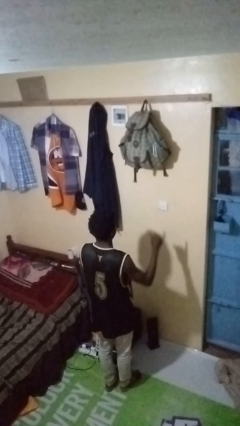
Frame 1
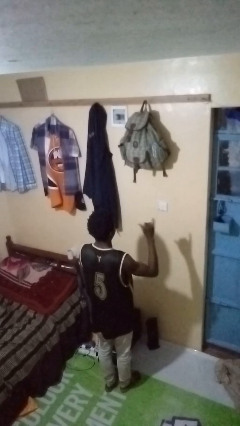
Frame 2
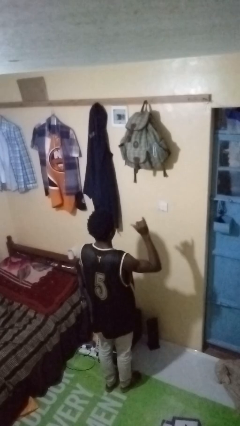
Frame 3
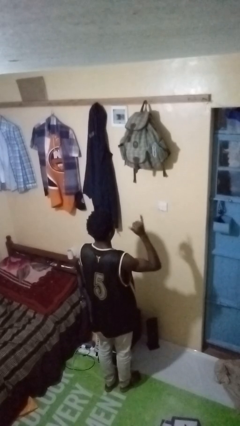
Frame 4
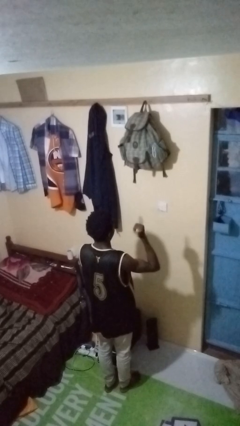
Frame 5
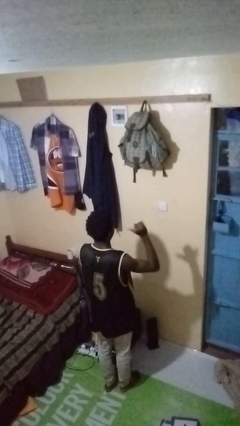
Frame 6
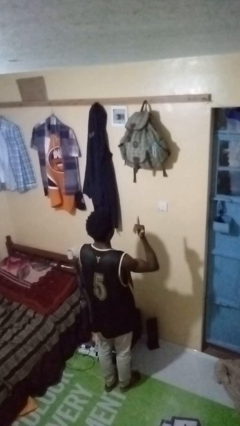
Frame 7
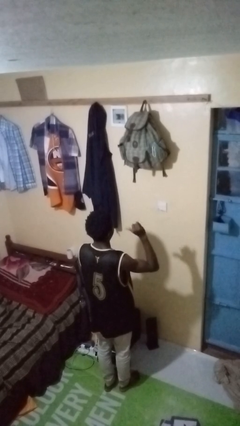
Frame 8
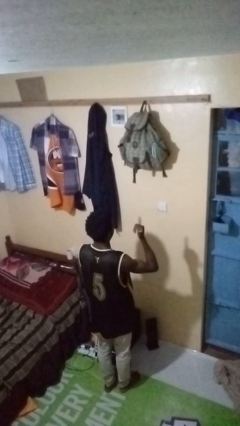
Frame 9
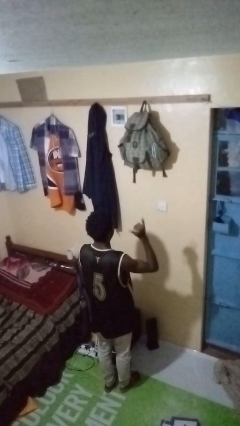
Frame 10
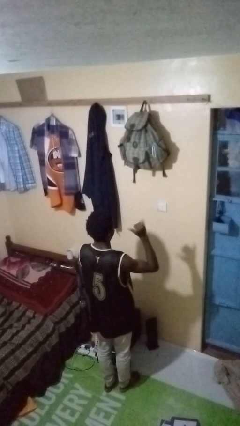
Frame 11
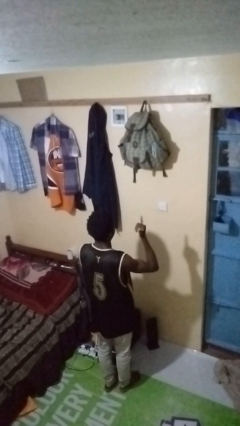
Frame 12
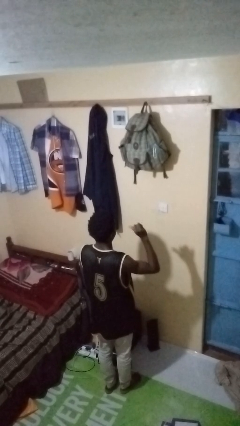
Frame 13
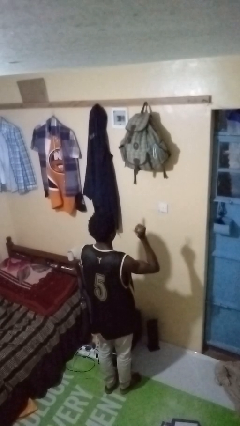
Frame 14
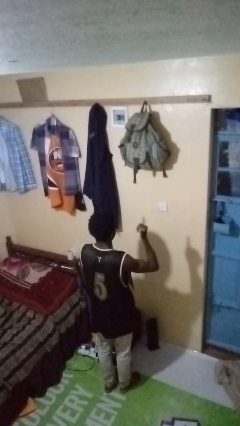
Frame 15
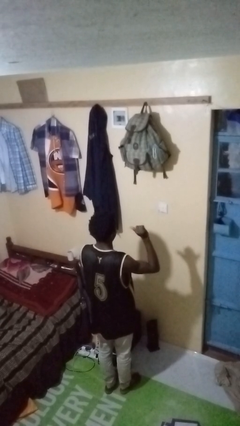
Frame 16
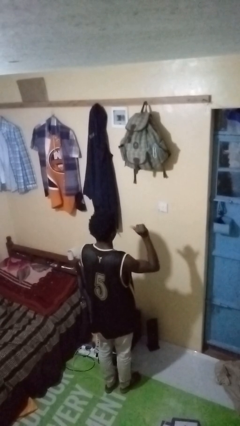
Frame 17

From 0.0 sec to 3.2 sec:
person gestures hang loose

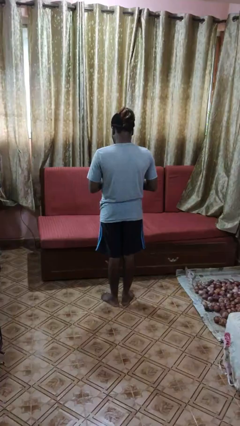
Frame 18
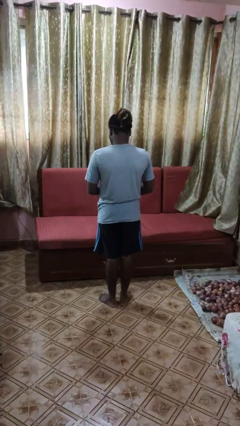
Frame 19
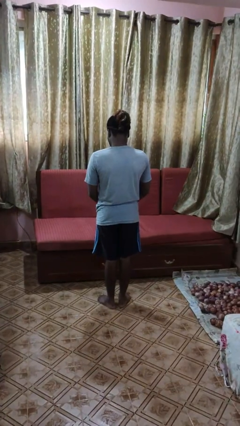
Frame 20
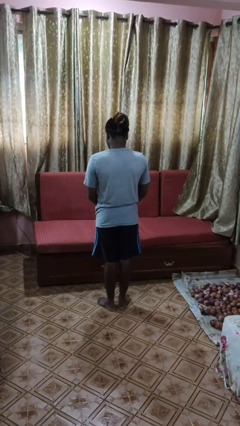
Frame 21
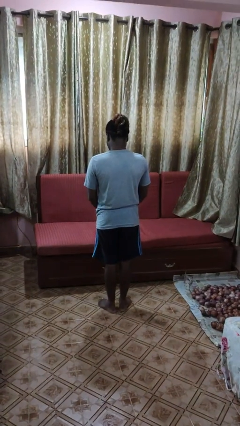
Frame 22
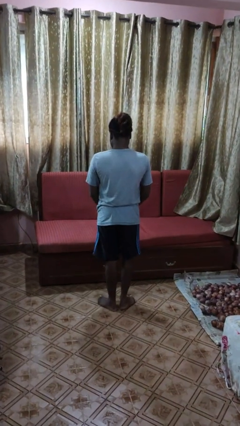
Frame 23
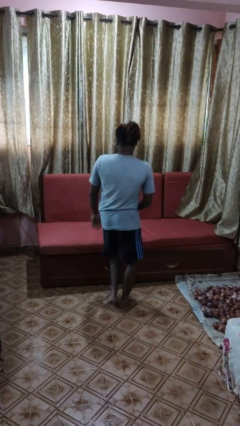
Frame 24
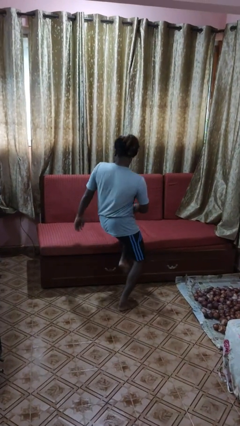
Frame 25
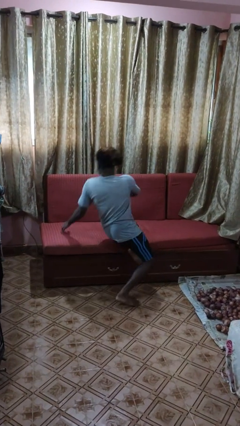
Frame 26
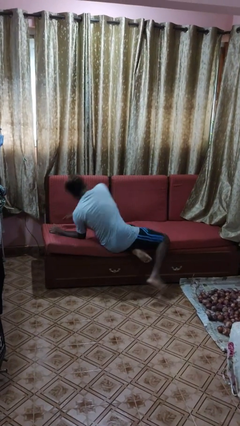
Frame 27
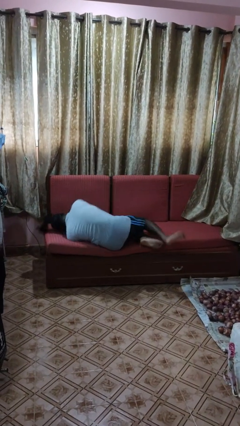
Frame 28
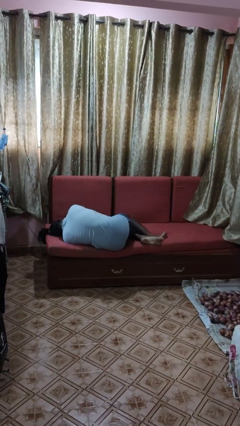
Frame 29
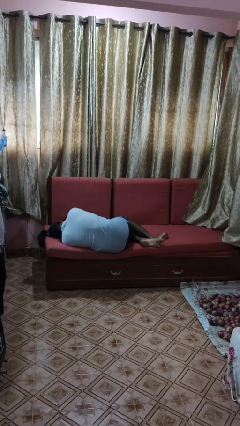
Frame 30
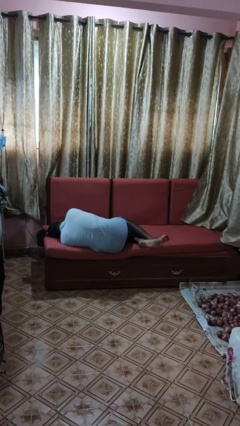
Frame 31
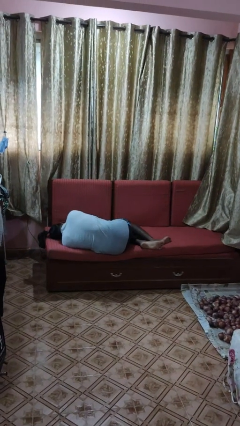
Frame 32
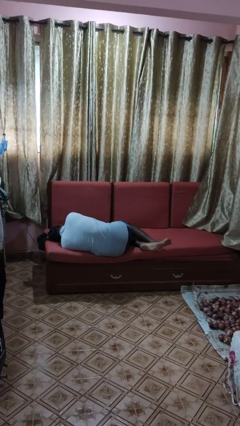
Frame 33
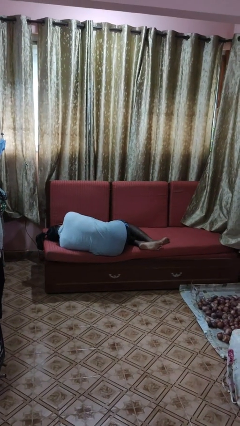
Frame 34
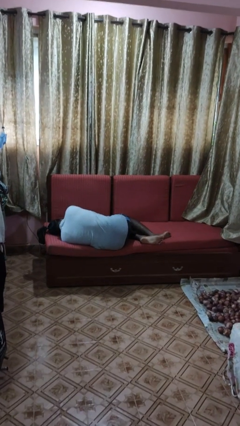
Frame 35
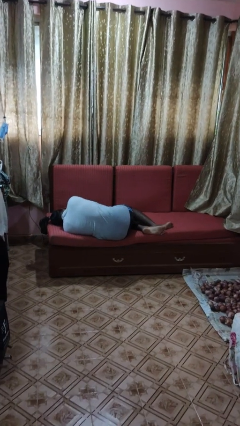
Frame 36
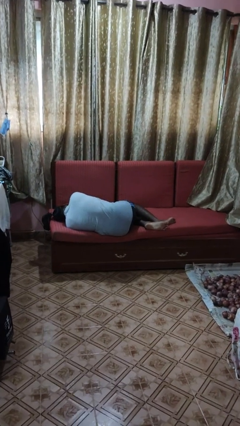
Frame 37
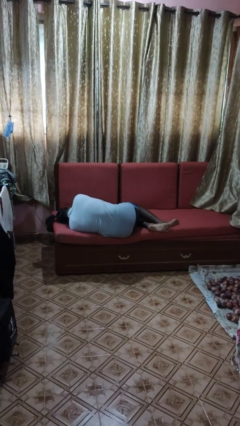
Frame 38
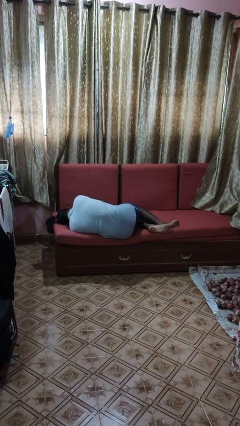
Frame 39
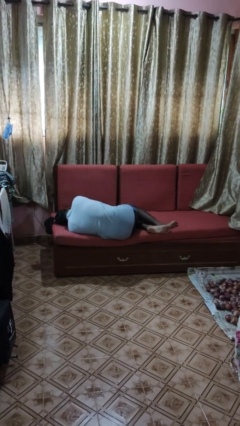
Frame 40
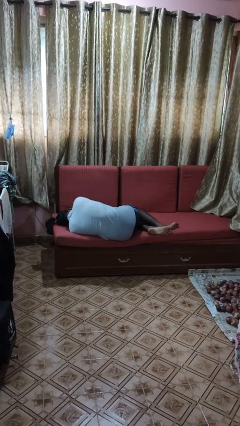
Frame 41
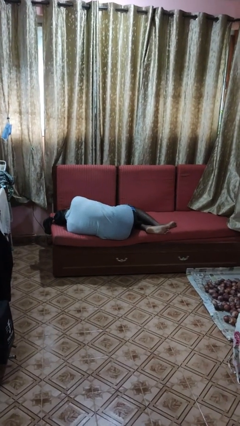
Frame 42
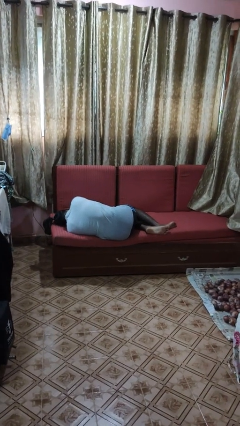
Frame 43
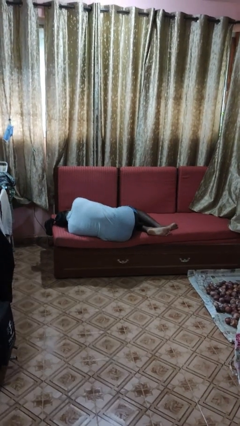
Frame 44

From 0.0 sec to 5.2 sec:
person lies down on couch

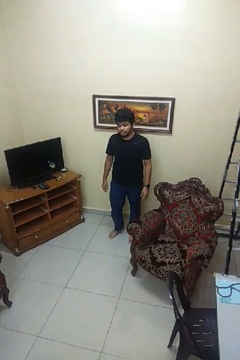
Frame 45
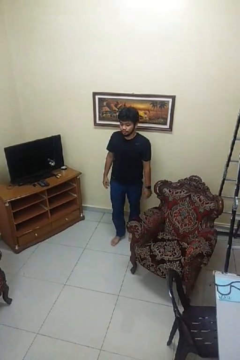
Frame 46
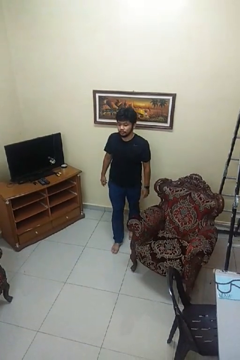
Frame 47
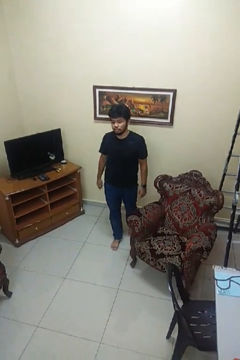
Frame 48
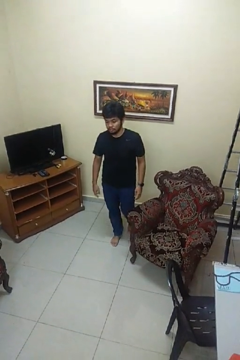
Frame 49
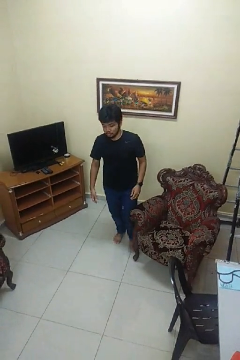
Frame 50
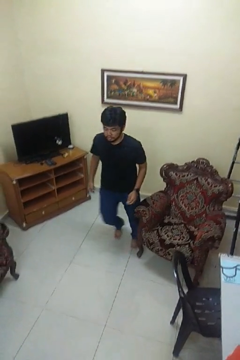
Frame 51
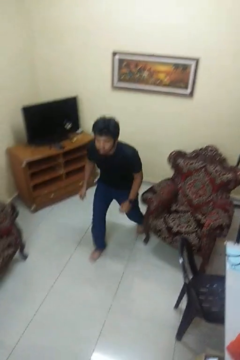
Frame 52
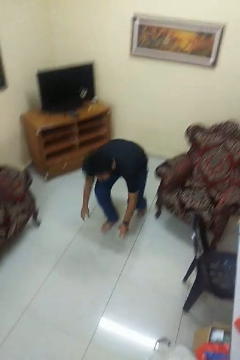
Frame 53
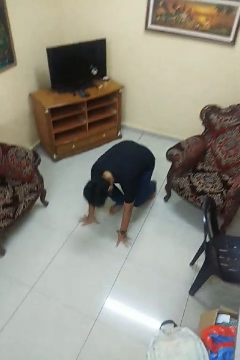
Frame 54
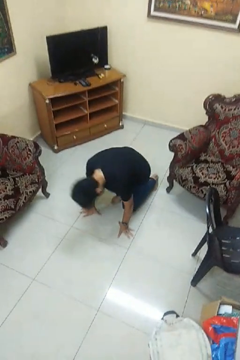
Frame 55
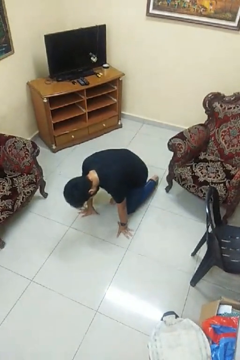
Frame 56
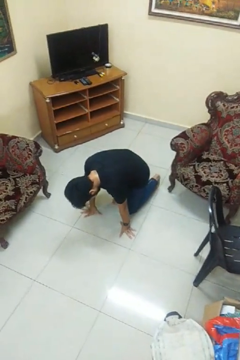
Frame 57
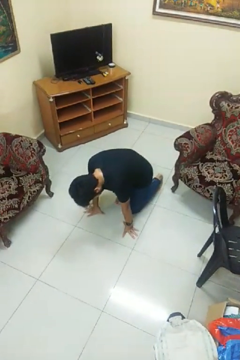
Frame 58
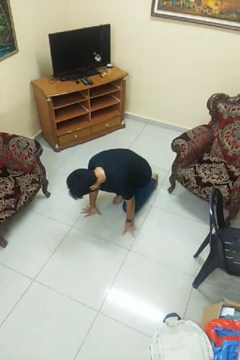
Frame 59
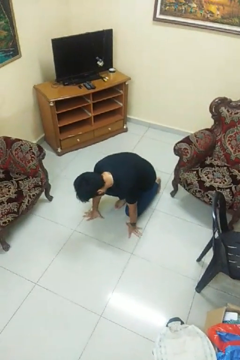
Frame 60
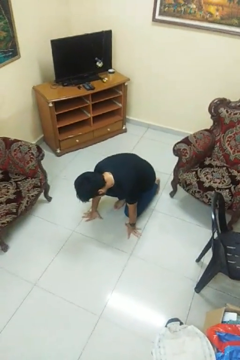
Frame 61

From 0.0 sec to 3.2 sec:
person trips on object on floor

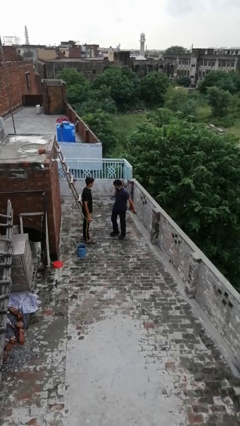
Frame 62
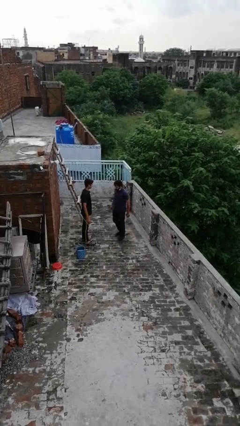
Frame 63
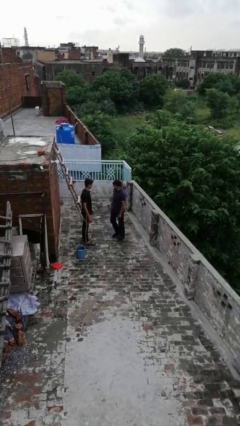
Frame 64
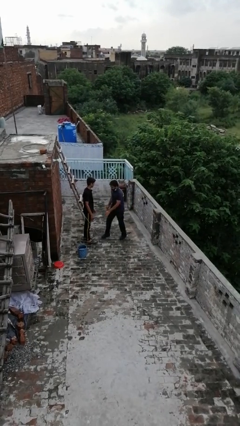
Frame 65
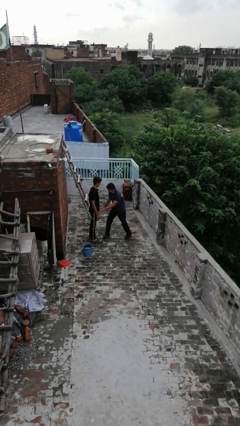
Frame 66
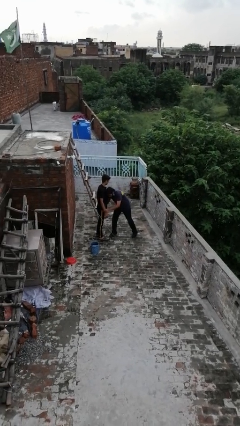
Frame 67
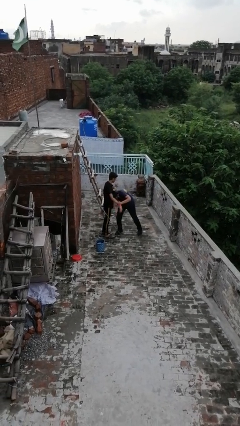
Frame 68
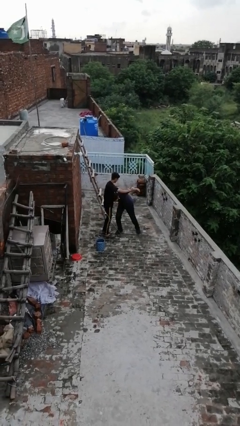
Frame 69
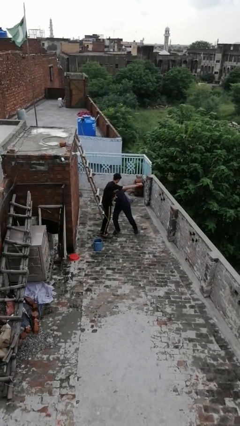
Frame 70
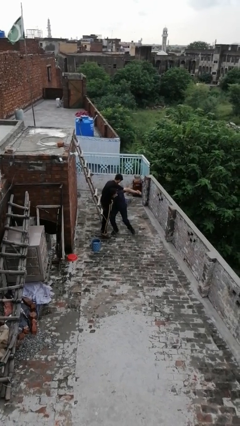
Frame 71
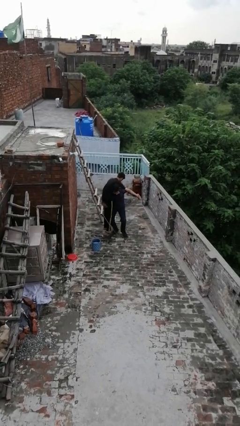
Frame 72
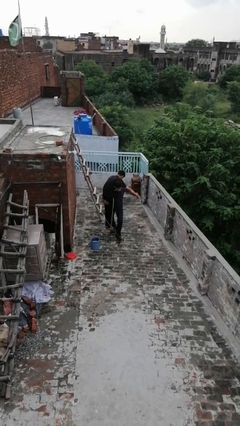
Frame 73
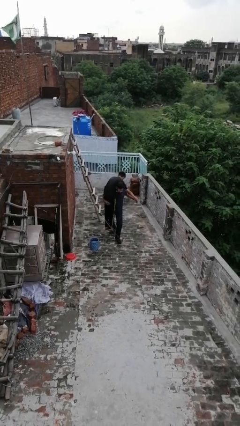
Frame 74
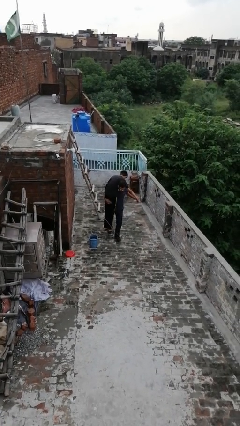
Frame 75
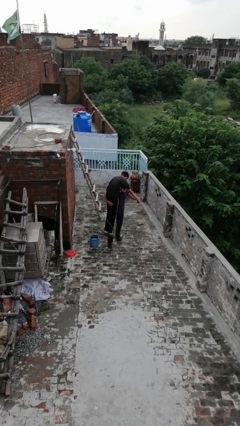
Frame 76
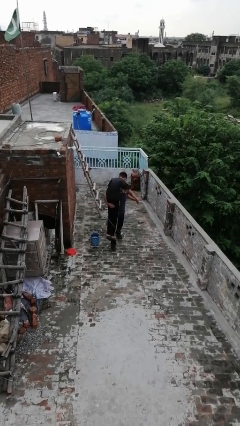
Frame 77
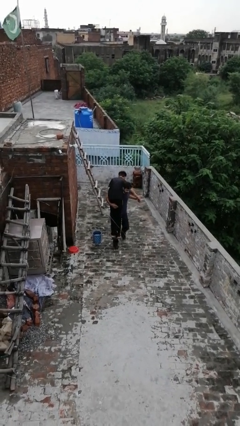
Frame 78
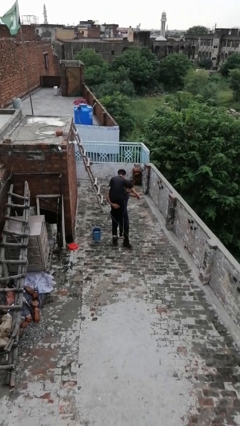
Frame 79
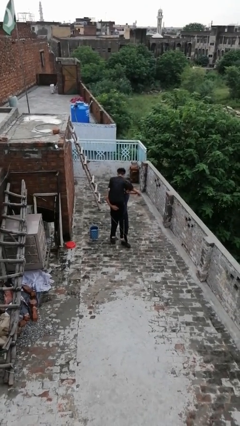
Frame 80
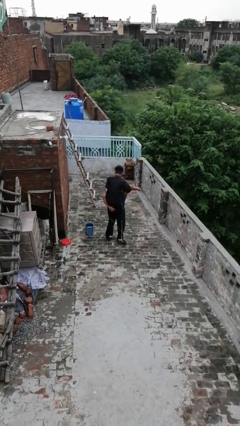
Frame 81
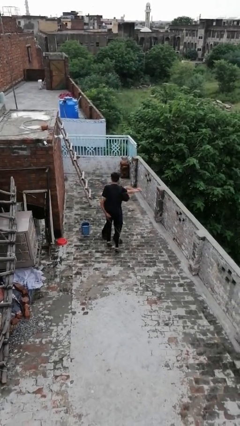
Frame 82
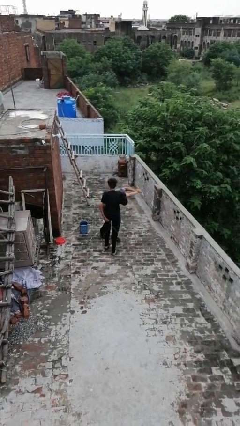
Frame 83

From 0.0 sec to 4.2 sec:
person carries person on shoulders

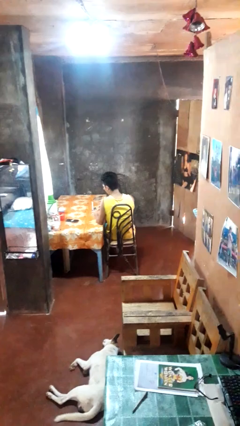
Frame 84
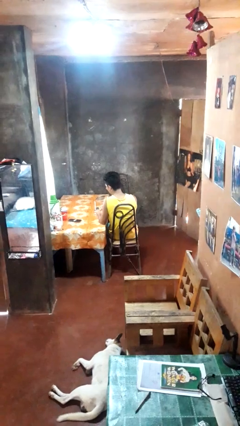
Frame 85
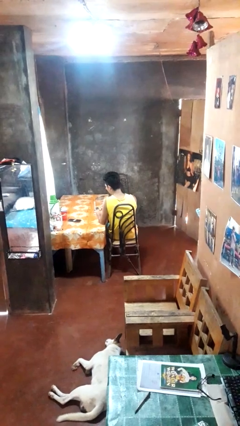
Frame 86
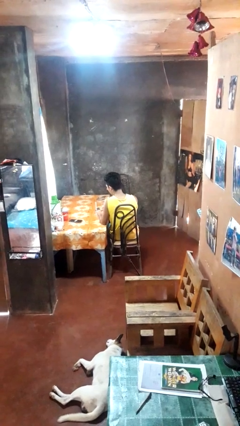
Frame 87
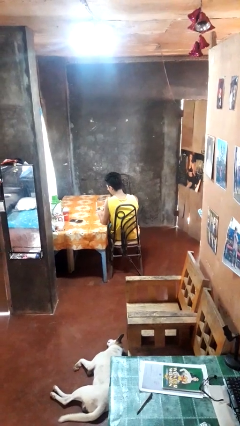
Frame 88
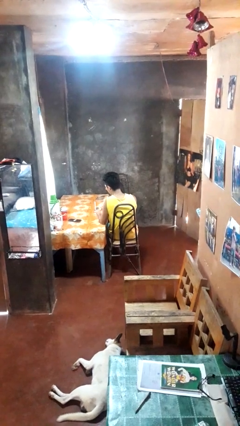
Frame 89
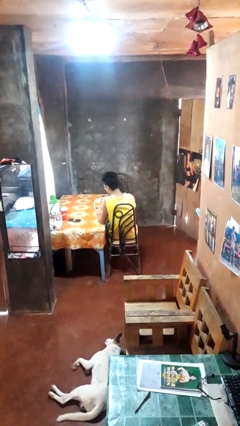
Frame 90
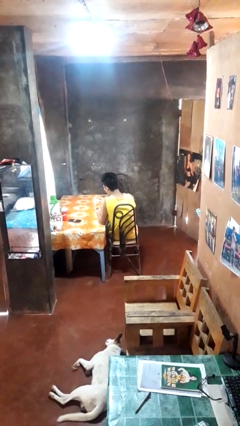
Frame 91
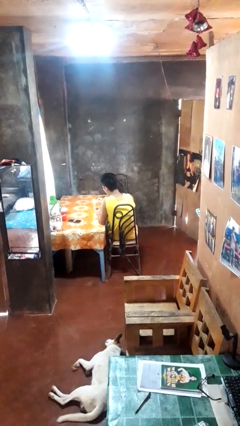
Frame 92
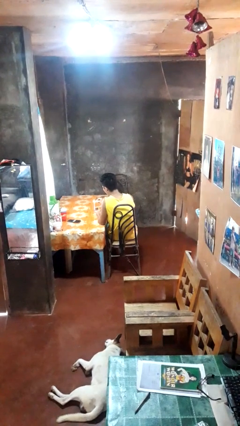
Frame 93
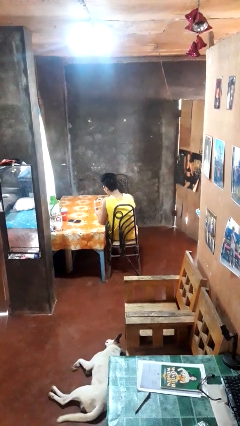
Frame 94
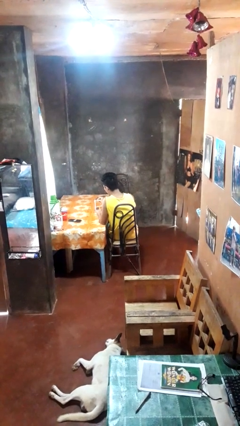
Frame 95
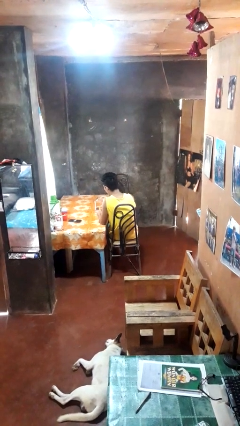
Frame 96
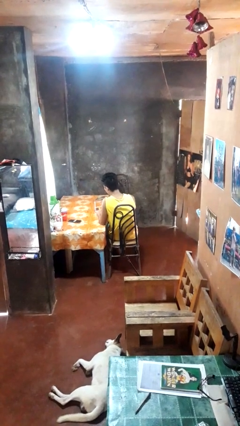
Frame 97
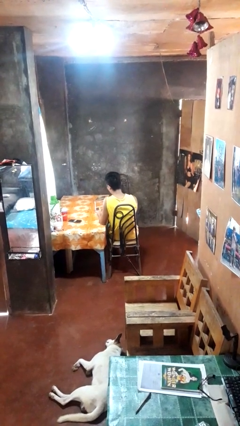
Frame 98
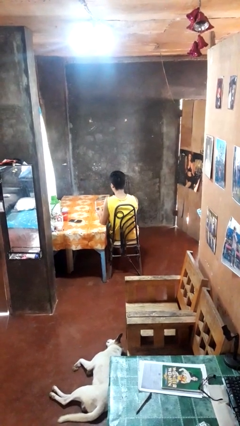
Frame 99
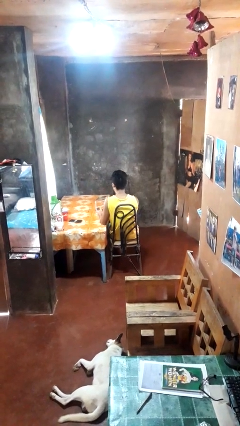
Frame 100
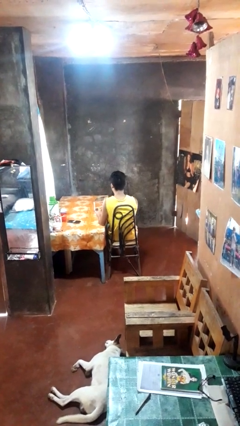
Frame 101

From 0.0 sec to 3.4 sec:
person lights candle
